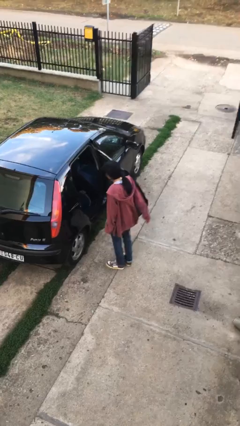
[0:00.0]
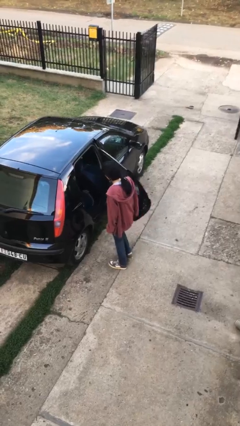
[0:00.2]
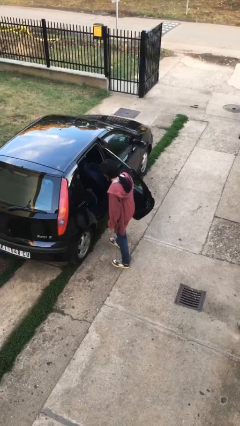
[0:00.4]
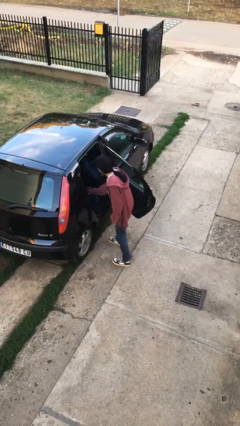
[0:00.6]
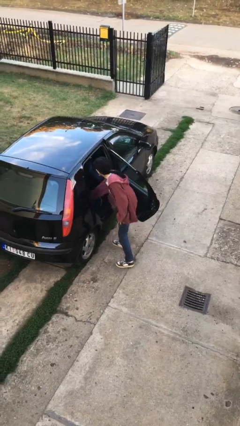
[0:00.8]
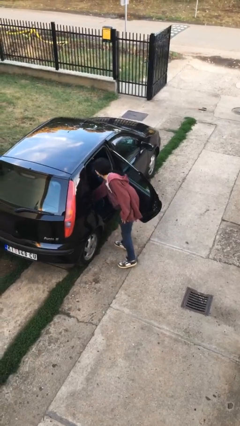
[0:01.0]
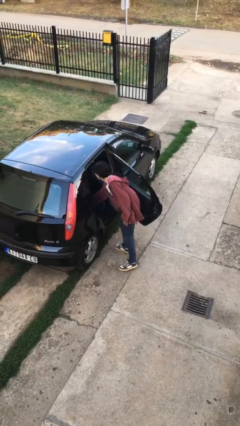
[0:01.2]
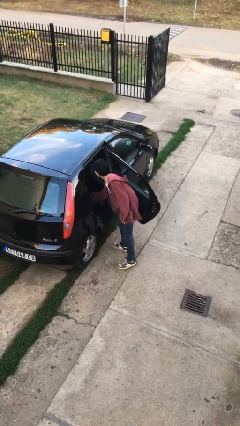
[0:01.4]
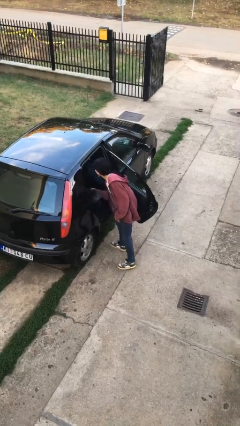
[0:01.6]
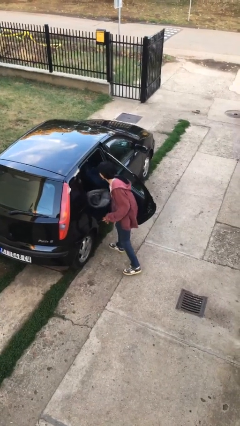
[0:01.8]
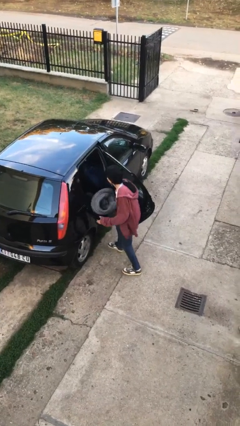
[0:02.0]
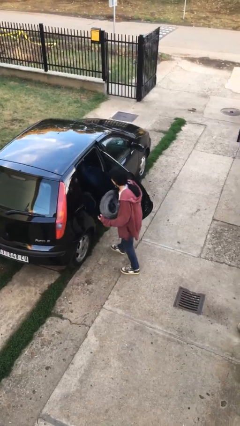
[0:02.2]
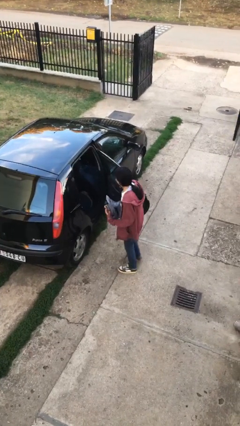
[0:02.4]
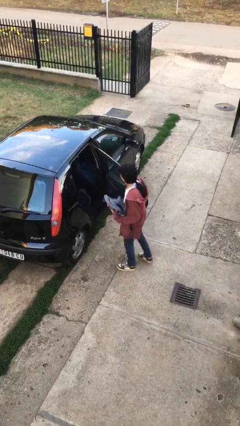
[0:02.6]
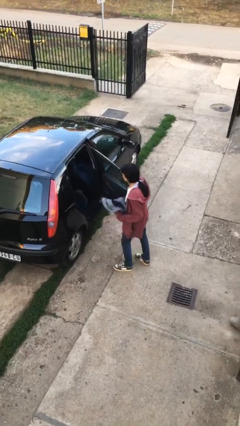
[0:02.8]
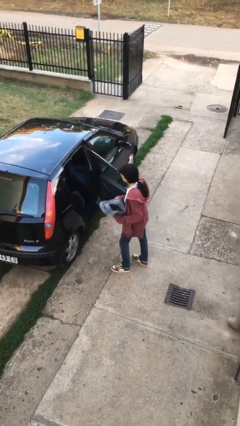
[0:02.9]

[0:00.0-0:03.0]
person unloads car

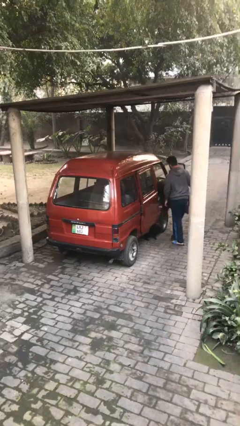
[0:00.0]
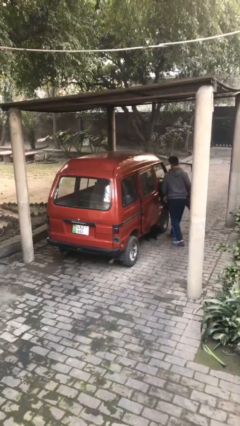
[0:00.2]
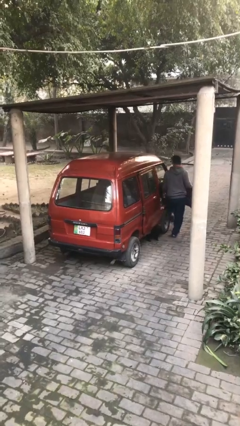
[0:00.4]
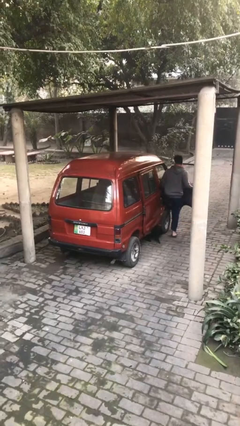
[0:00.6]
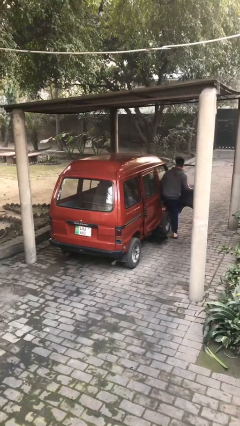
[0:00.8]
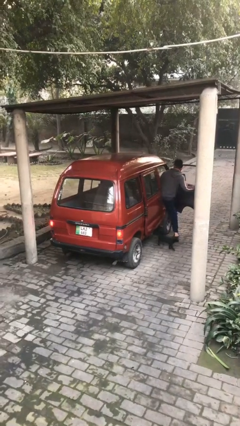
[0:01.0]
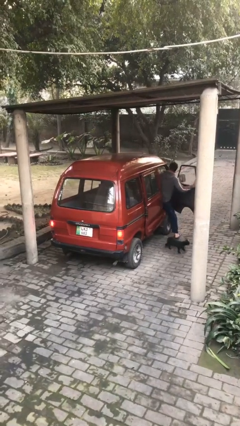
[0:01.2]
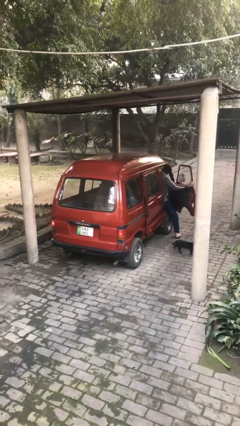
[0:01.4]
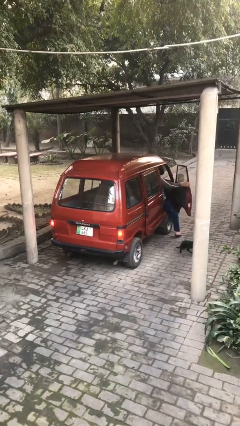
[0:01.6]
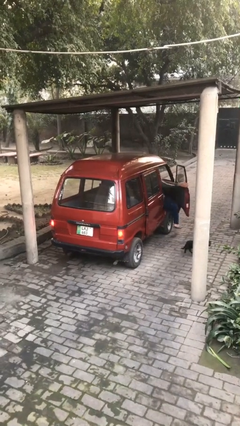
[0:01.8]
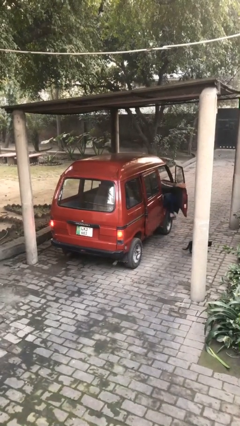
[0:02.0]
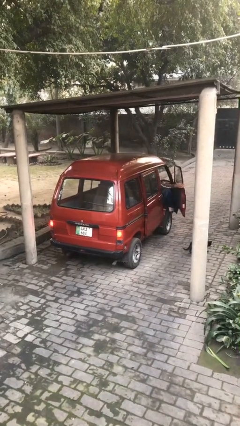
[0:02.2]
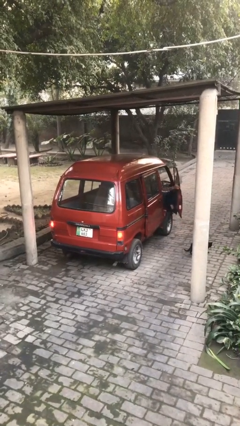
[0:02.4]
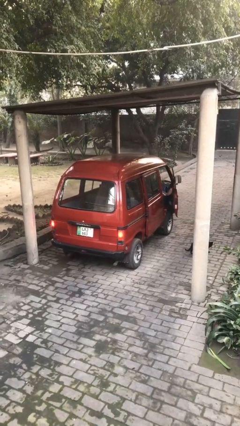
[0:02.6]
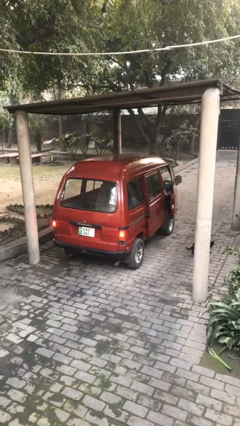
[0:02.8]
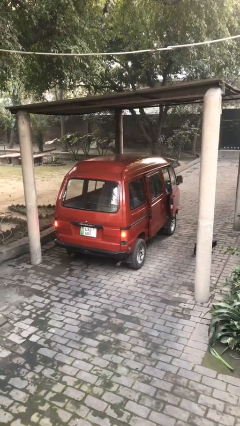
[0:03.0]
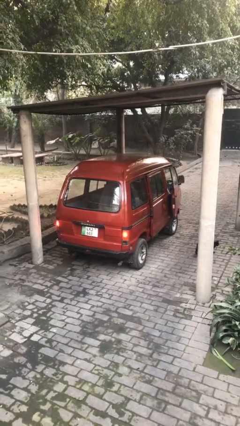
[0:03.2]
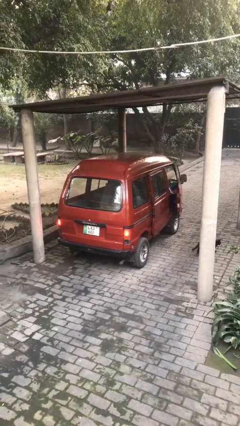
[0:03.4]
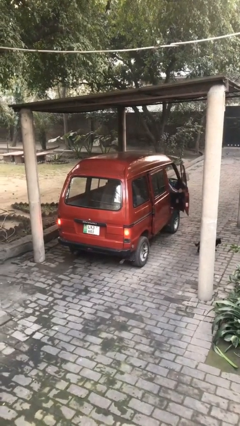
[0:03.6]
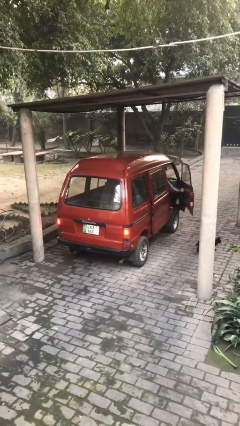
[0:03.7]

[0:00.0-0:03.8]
car picks up person

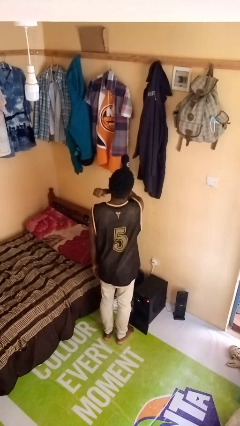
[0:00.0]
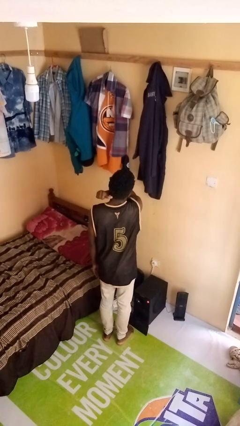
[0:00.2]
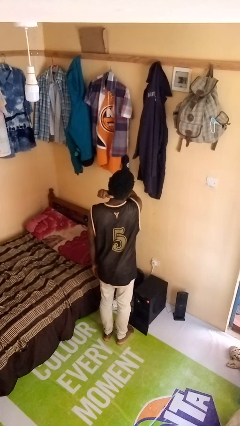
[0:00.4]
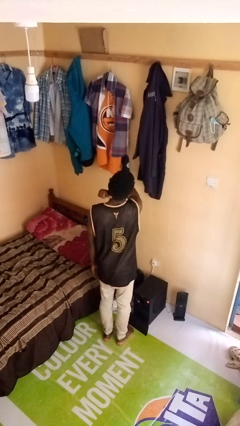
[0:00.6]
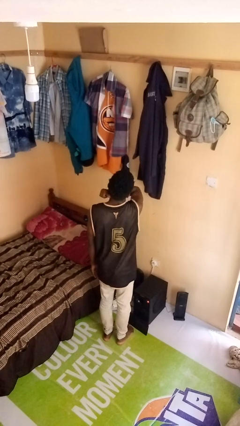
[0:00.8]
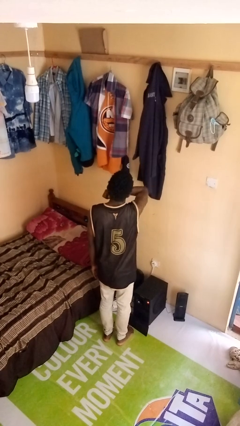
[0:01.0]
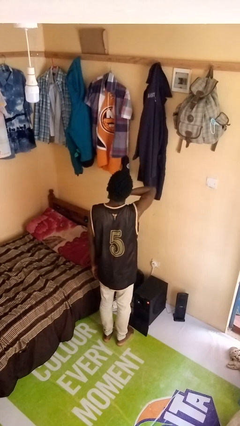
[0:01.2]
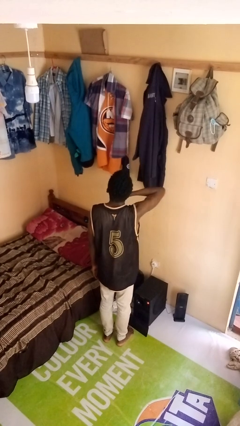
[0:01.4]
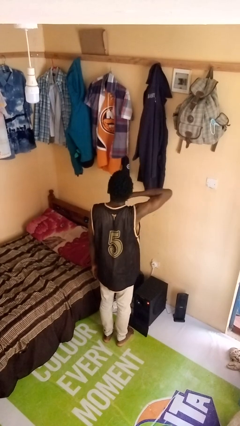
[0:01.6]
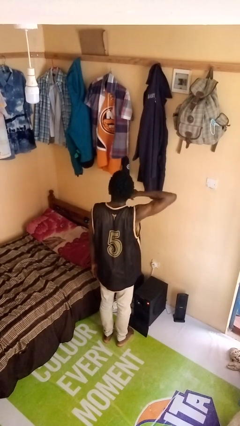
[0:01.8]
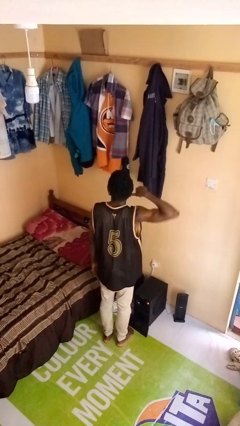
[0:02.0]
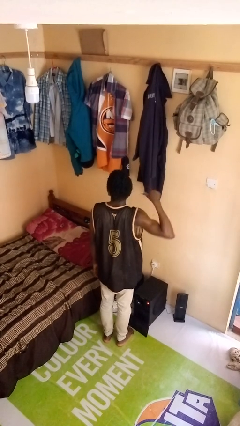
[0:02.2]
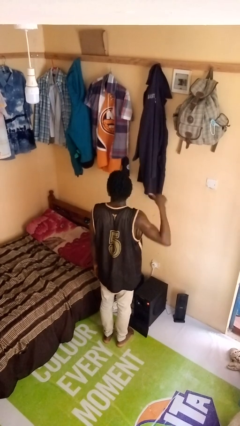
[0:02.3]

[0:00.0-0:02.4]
person gestures cut

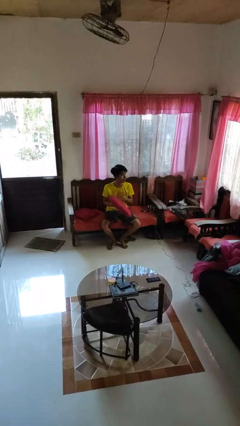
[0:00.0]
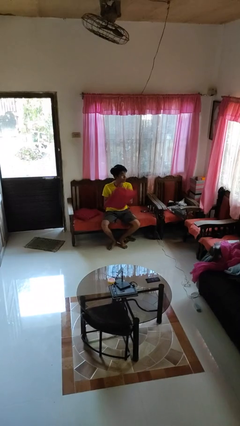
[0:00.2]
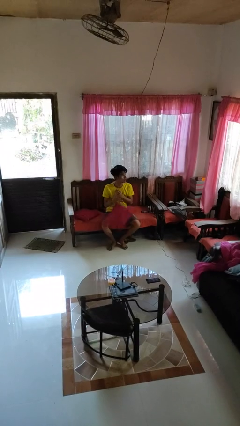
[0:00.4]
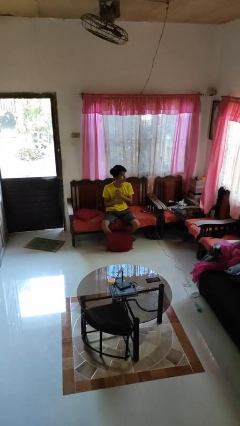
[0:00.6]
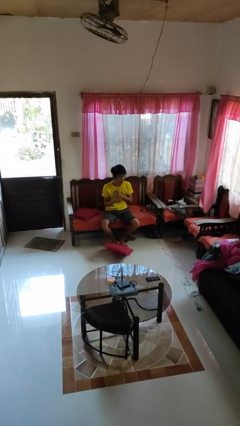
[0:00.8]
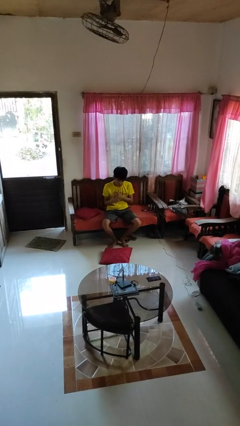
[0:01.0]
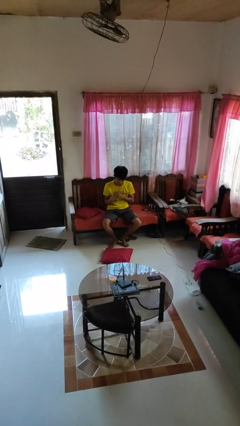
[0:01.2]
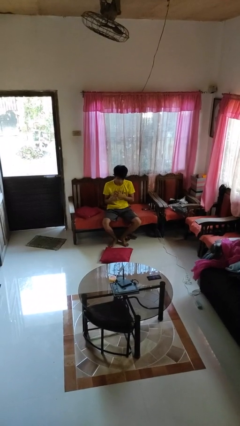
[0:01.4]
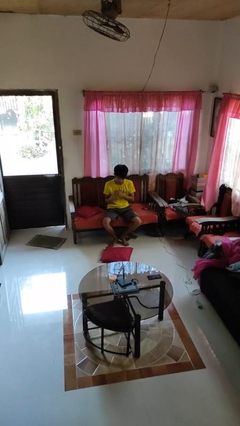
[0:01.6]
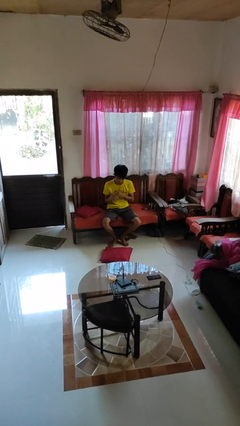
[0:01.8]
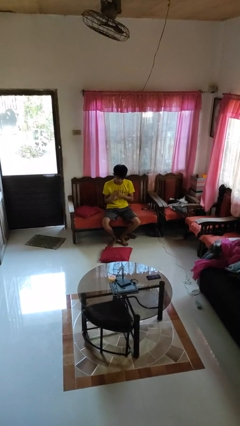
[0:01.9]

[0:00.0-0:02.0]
person drops object

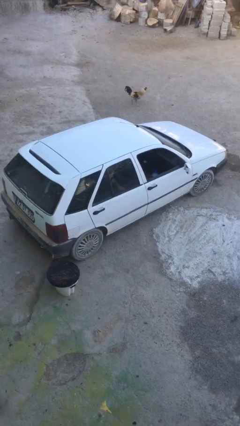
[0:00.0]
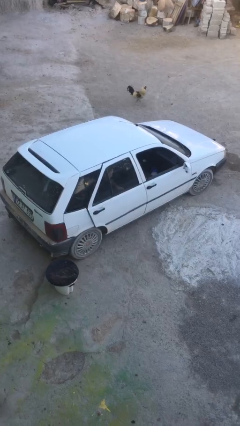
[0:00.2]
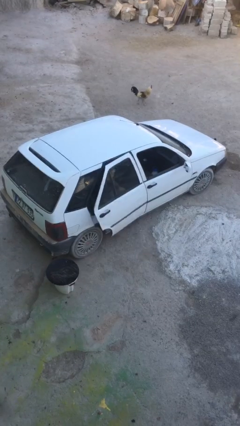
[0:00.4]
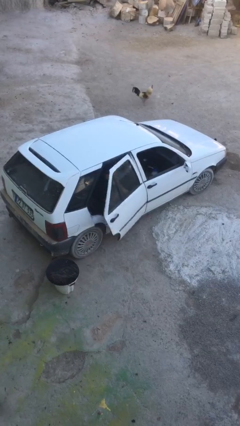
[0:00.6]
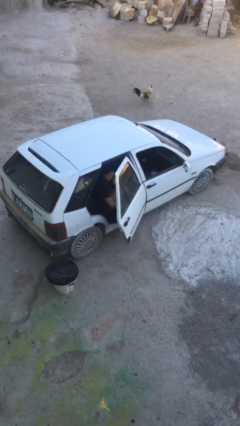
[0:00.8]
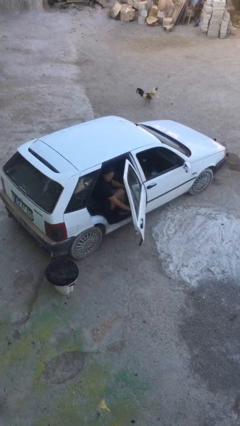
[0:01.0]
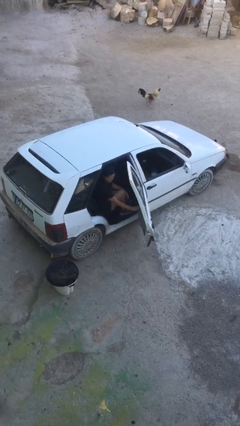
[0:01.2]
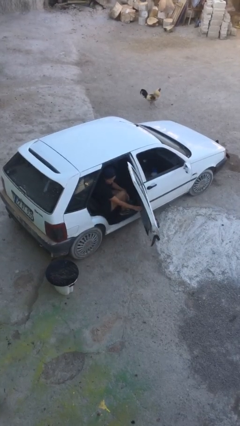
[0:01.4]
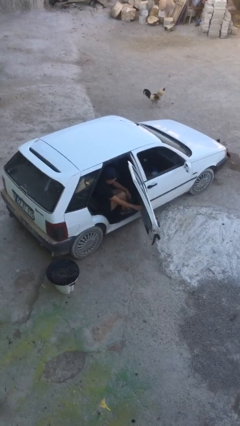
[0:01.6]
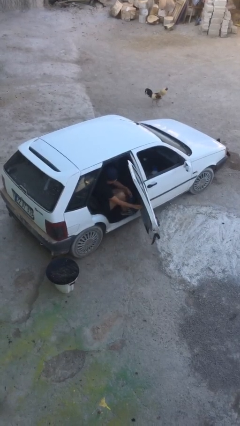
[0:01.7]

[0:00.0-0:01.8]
person opens car door

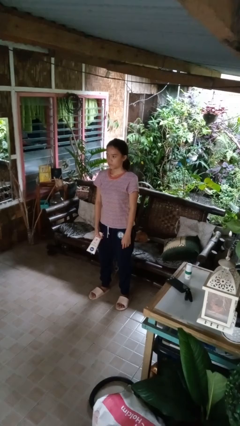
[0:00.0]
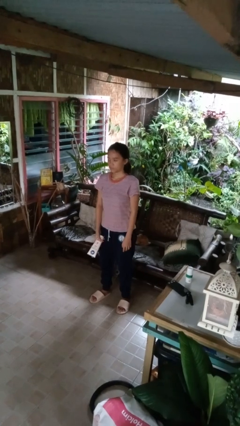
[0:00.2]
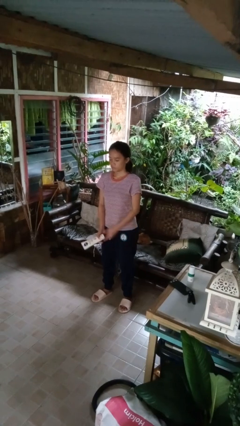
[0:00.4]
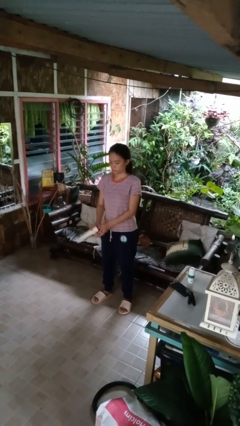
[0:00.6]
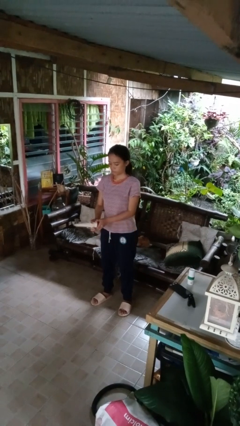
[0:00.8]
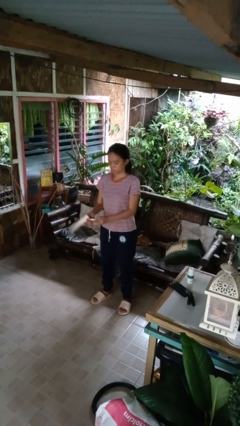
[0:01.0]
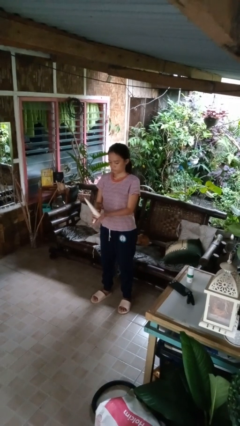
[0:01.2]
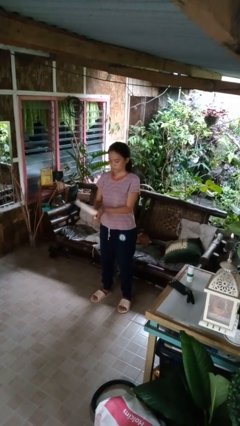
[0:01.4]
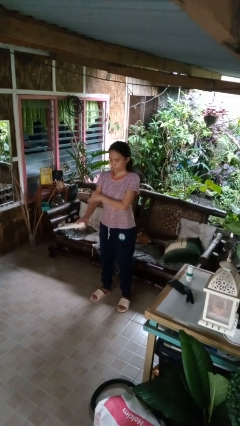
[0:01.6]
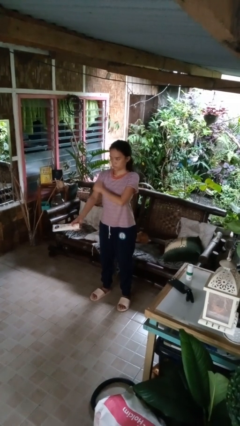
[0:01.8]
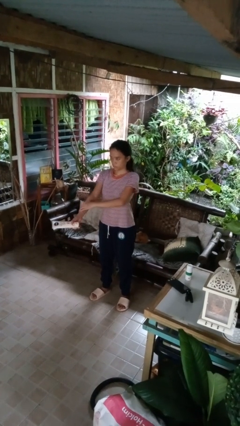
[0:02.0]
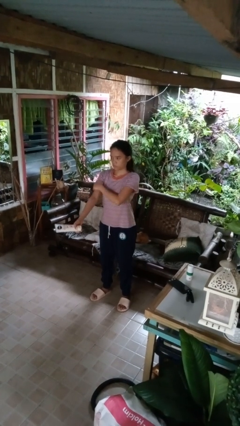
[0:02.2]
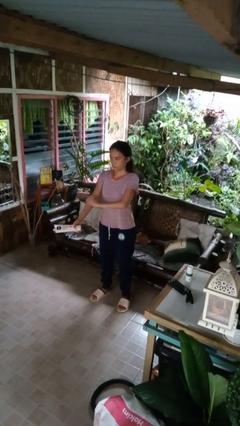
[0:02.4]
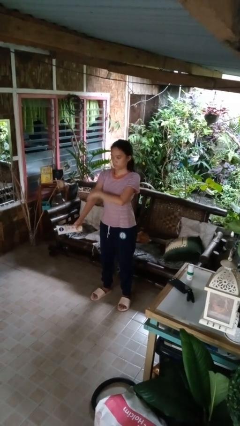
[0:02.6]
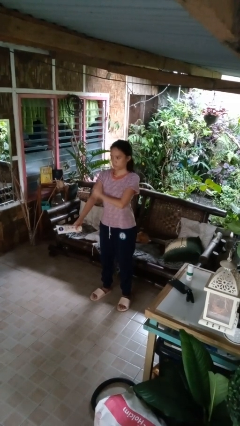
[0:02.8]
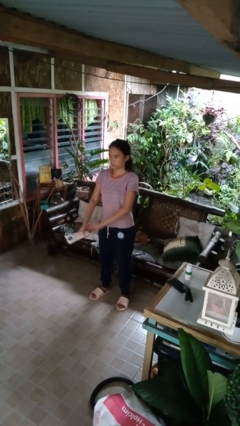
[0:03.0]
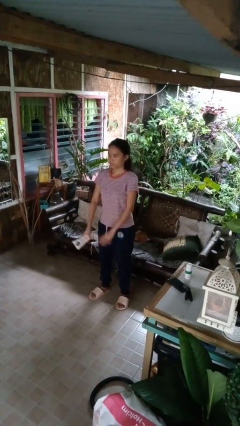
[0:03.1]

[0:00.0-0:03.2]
person applies sunscreen

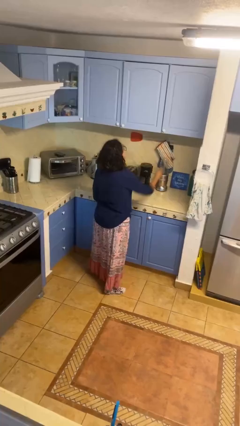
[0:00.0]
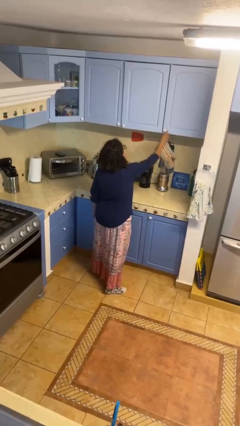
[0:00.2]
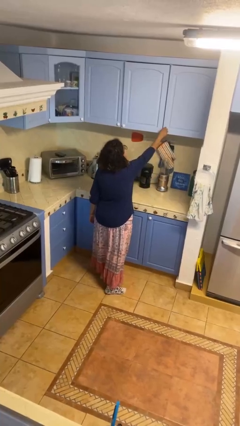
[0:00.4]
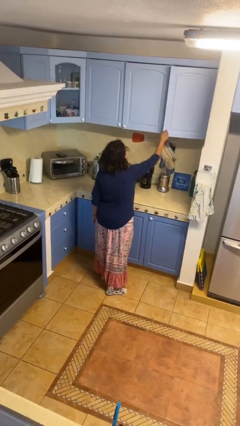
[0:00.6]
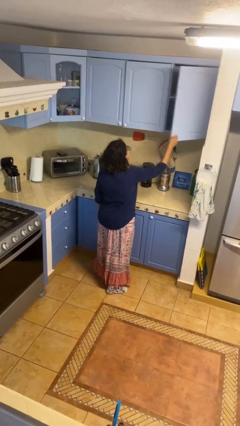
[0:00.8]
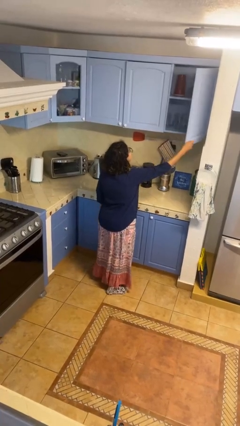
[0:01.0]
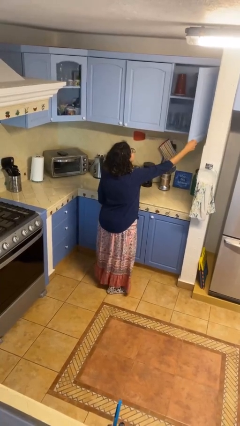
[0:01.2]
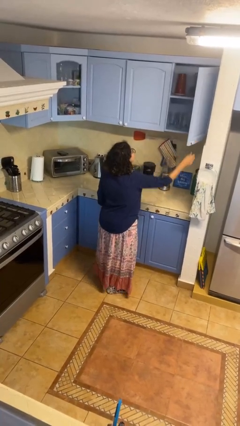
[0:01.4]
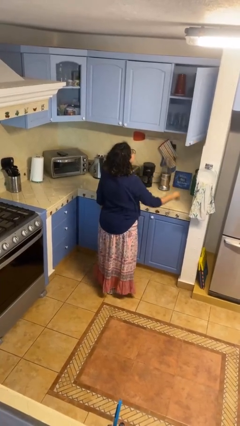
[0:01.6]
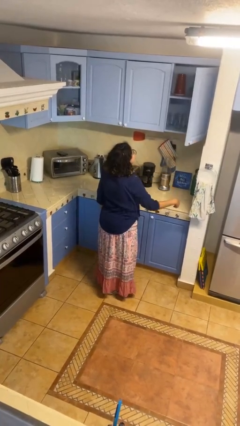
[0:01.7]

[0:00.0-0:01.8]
person opens cabinet
